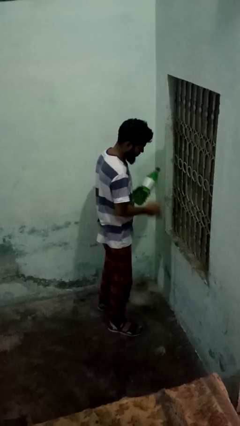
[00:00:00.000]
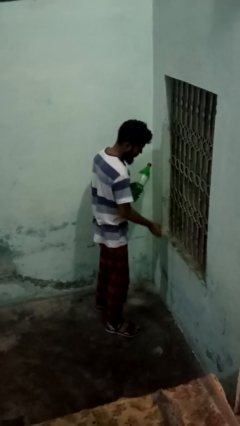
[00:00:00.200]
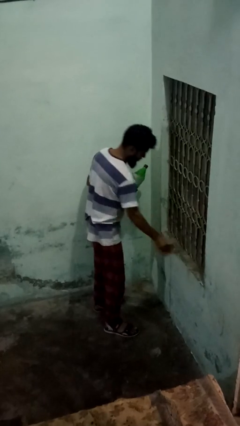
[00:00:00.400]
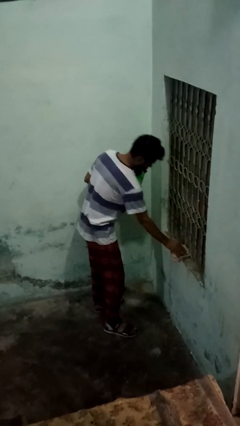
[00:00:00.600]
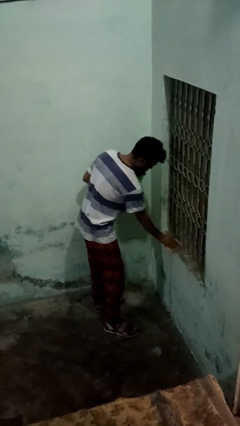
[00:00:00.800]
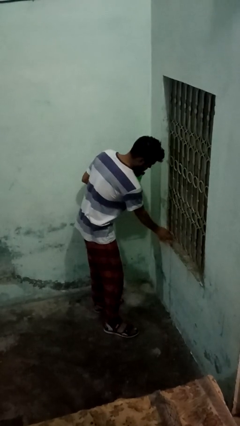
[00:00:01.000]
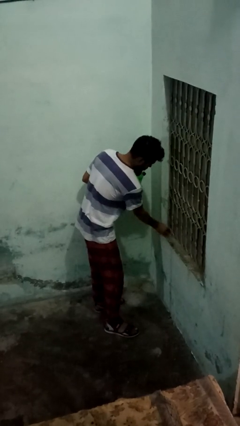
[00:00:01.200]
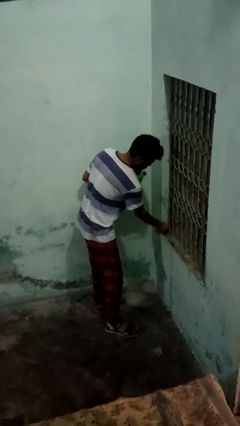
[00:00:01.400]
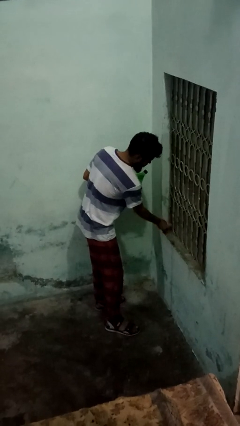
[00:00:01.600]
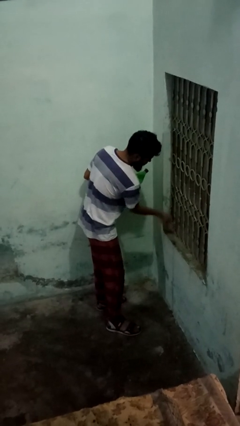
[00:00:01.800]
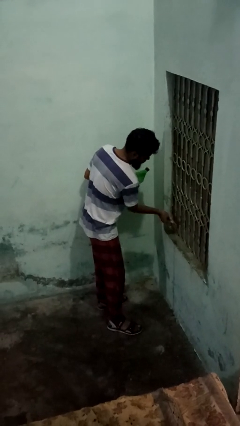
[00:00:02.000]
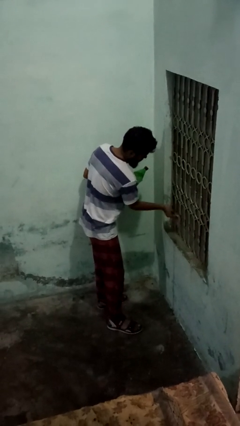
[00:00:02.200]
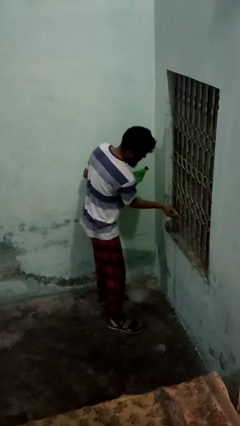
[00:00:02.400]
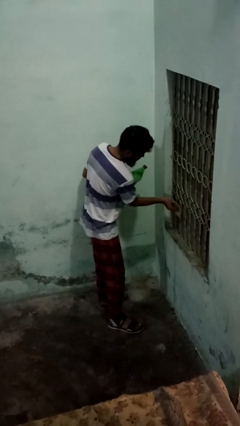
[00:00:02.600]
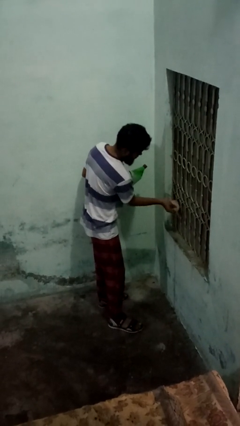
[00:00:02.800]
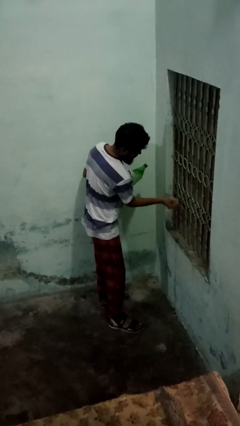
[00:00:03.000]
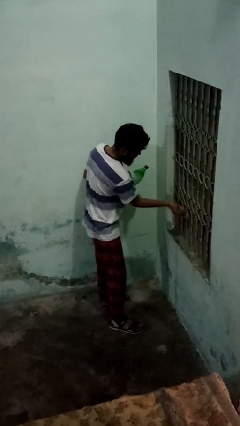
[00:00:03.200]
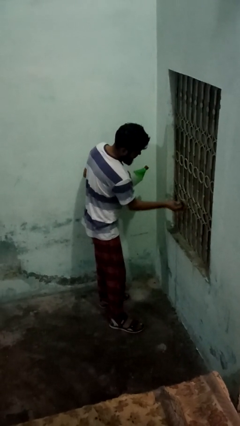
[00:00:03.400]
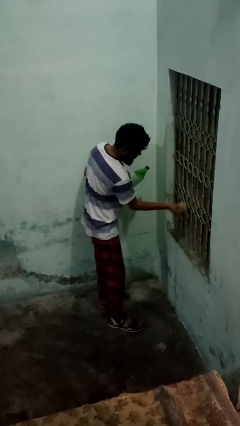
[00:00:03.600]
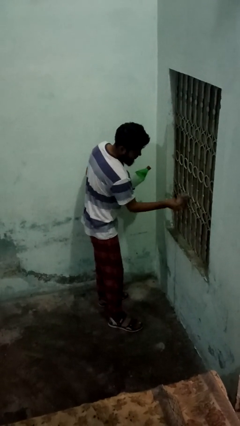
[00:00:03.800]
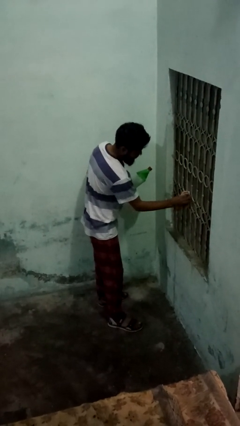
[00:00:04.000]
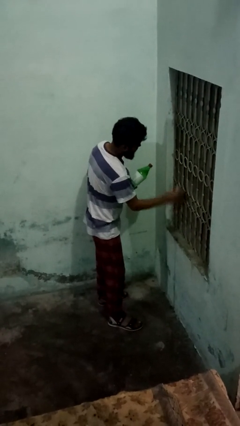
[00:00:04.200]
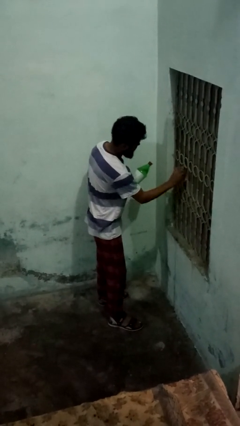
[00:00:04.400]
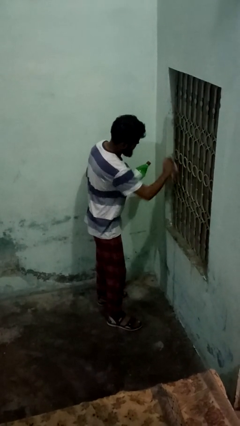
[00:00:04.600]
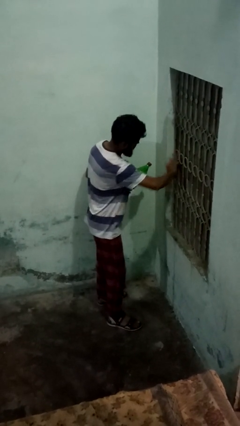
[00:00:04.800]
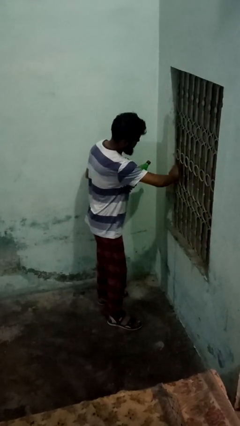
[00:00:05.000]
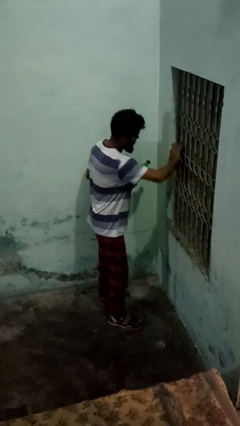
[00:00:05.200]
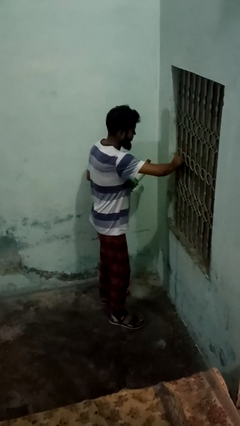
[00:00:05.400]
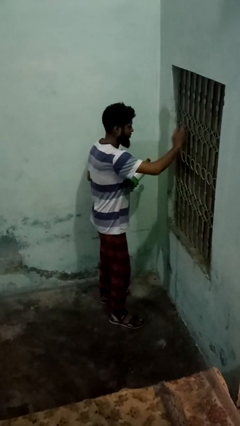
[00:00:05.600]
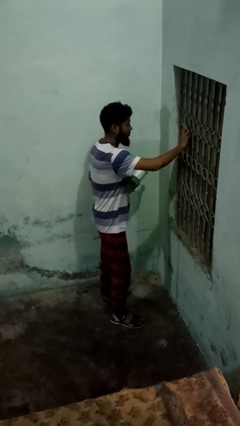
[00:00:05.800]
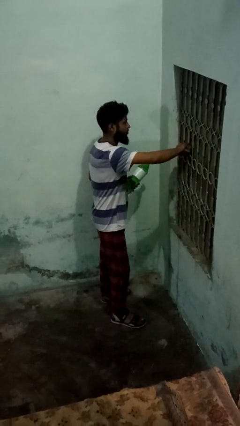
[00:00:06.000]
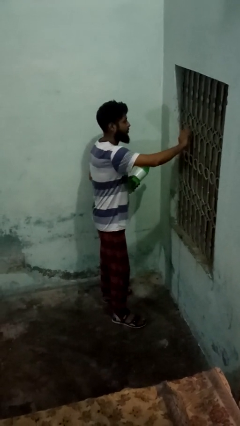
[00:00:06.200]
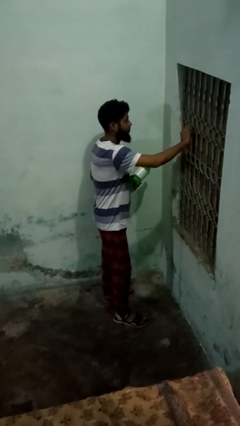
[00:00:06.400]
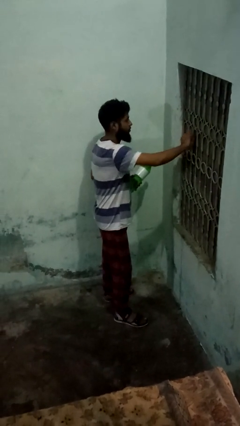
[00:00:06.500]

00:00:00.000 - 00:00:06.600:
person washes window

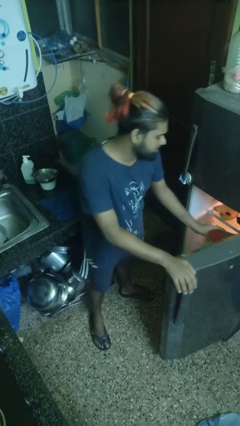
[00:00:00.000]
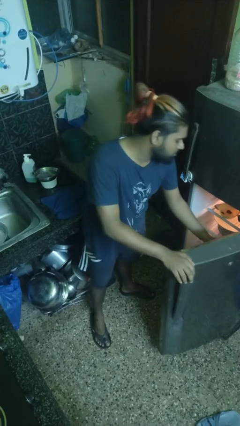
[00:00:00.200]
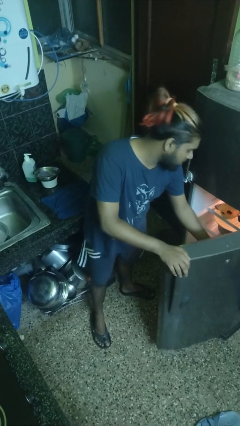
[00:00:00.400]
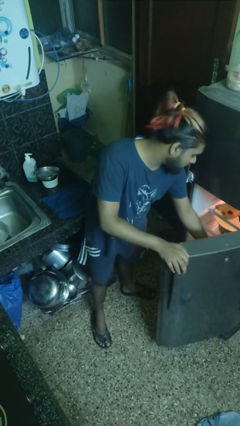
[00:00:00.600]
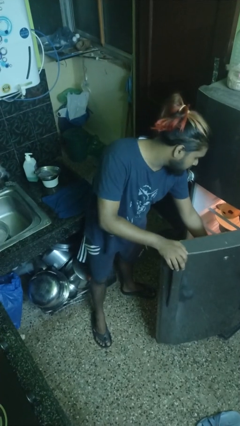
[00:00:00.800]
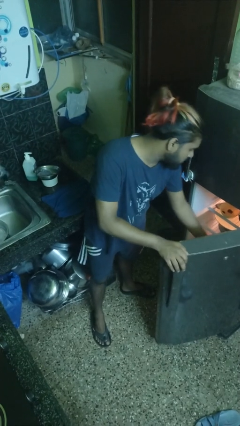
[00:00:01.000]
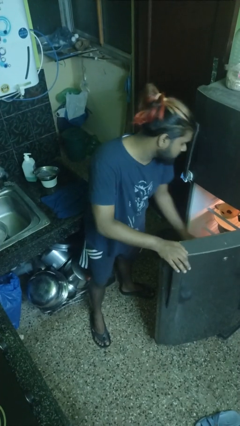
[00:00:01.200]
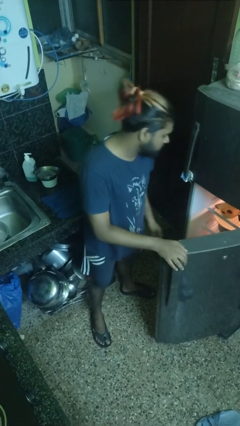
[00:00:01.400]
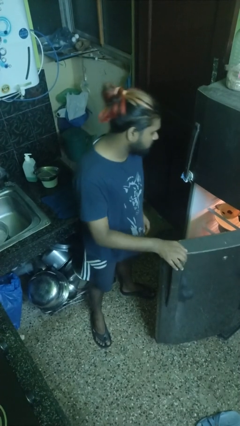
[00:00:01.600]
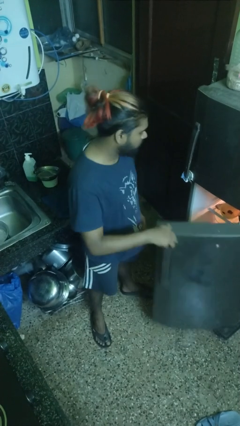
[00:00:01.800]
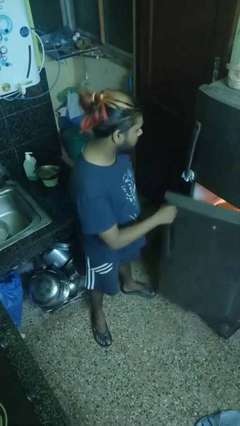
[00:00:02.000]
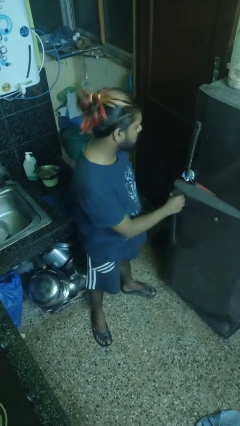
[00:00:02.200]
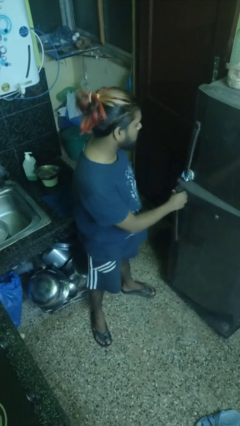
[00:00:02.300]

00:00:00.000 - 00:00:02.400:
person puts object into refrigerator

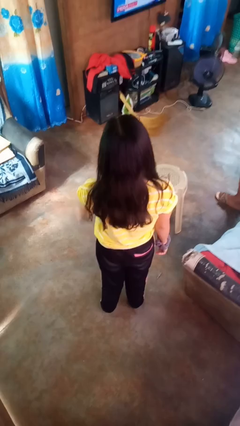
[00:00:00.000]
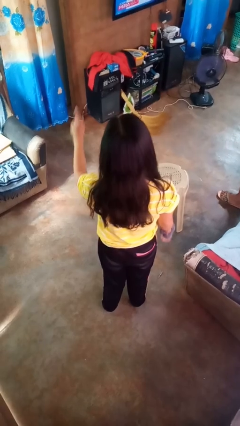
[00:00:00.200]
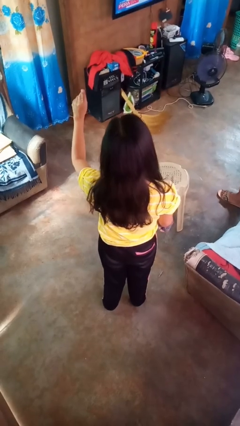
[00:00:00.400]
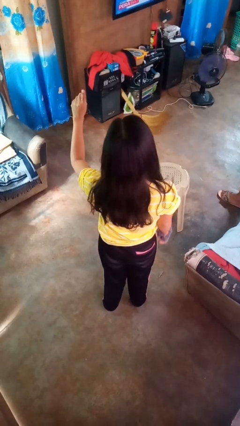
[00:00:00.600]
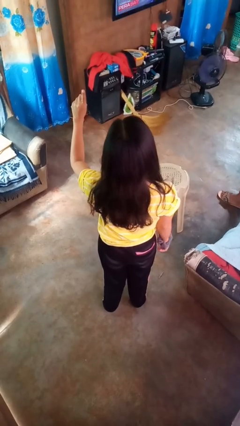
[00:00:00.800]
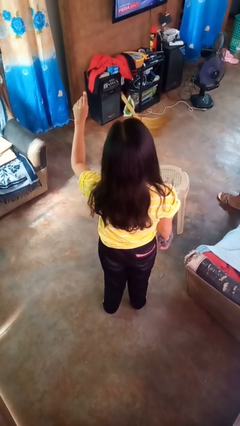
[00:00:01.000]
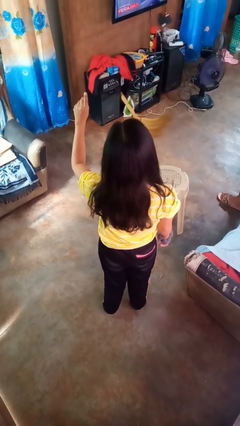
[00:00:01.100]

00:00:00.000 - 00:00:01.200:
person gestures number one

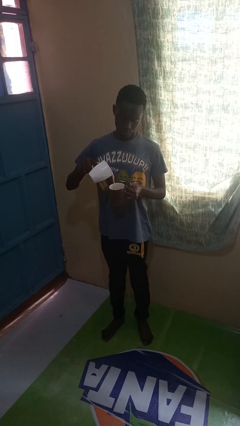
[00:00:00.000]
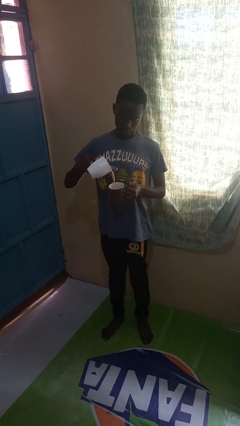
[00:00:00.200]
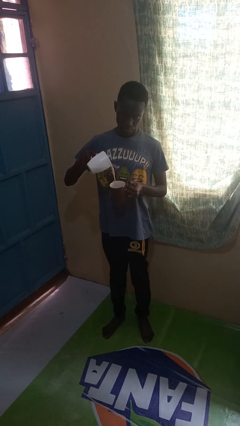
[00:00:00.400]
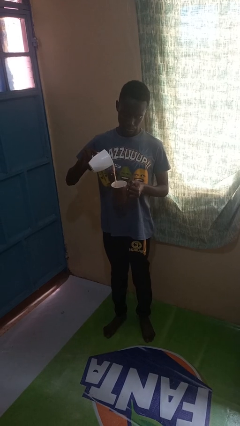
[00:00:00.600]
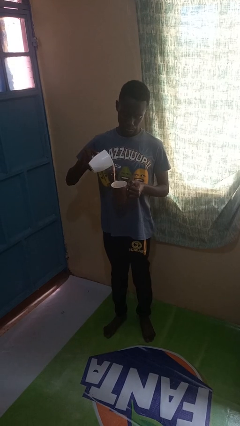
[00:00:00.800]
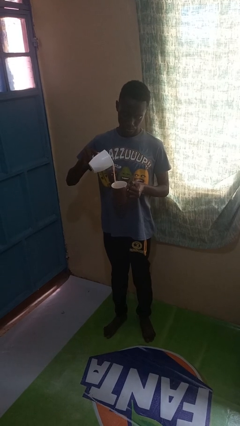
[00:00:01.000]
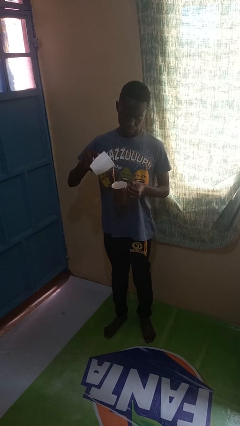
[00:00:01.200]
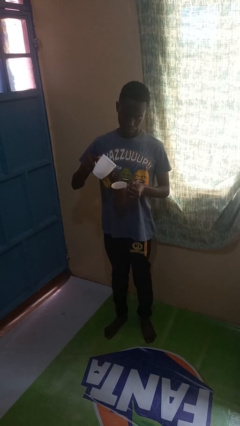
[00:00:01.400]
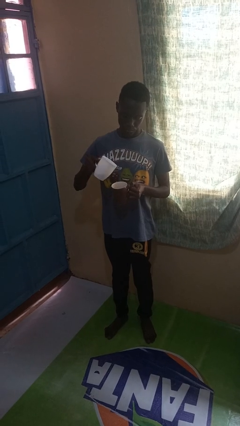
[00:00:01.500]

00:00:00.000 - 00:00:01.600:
person pours coffee into mug

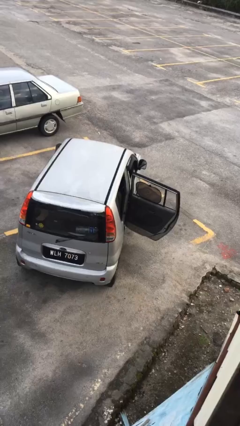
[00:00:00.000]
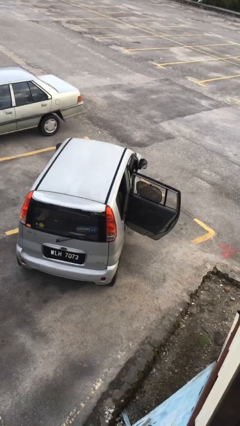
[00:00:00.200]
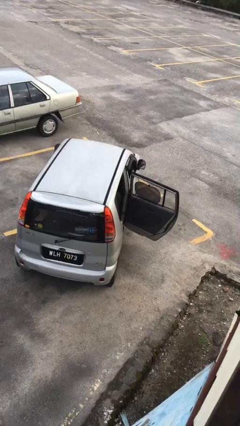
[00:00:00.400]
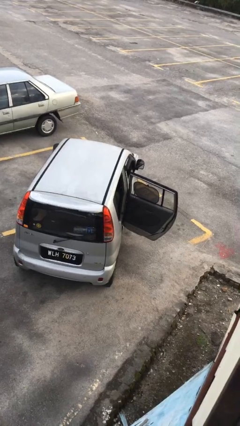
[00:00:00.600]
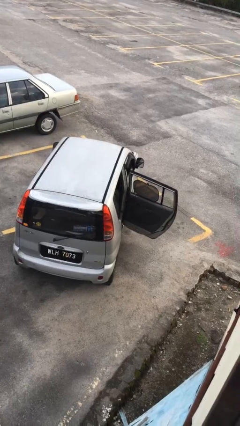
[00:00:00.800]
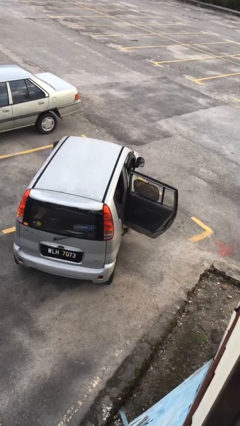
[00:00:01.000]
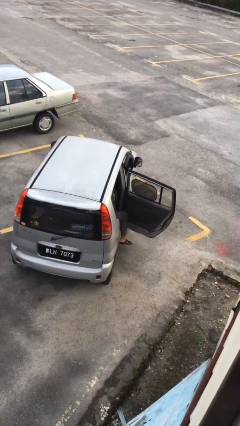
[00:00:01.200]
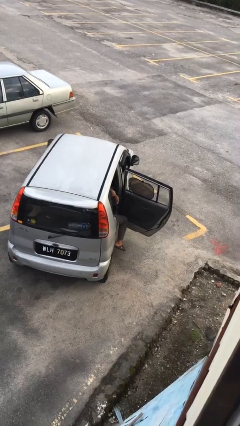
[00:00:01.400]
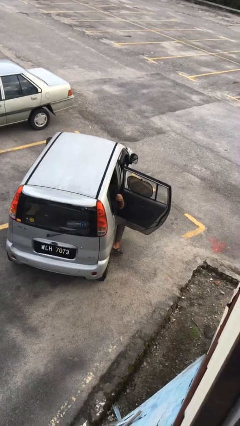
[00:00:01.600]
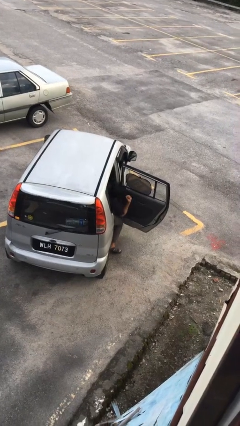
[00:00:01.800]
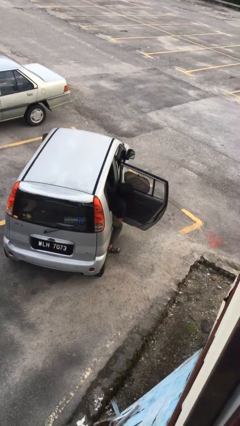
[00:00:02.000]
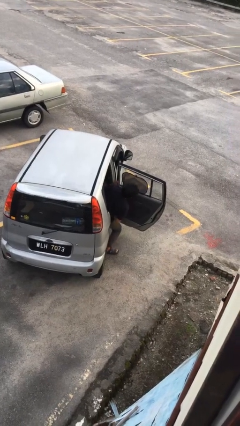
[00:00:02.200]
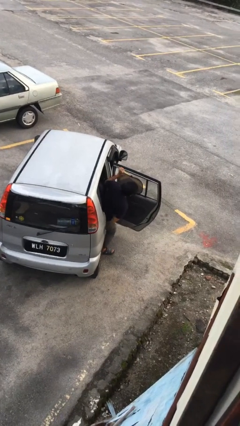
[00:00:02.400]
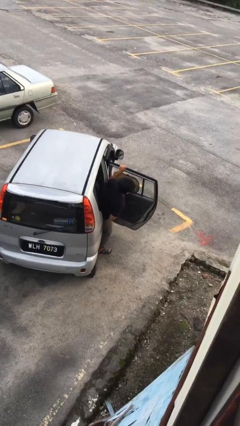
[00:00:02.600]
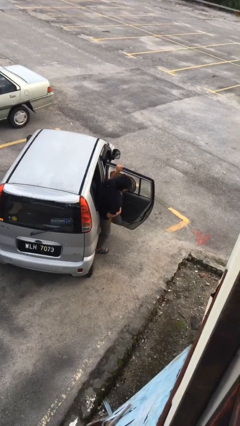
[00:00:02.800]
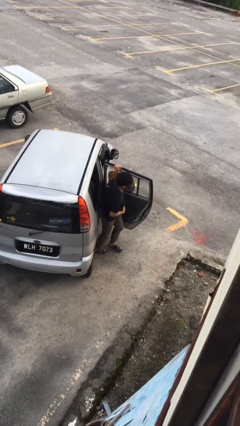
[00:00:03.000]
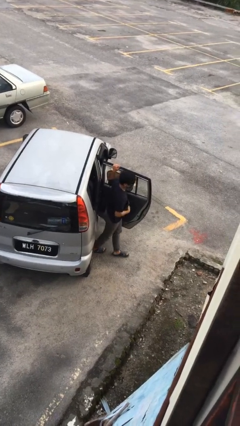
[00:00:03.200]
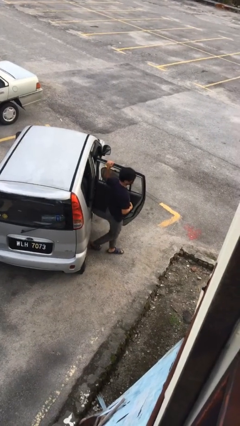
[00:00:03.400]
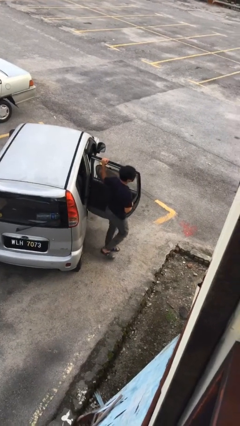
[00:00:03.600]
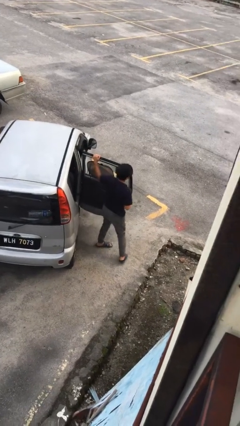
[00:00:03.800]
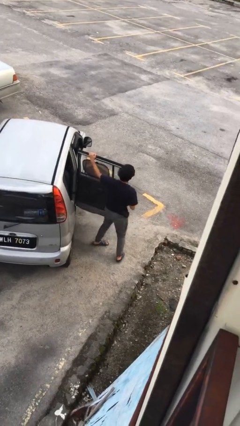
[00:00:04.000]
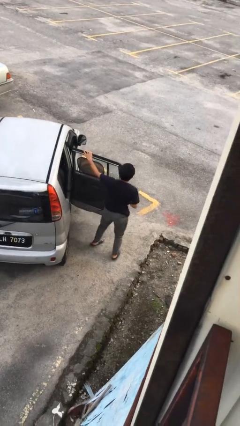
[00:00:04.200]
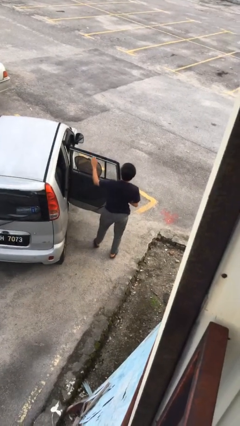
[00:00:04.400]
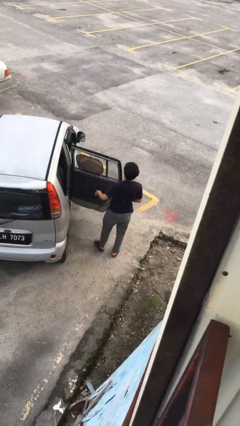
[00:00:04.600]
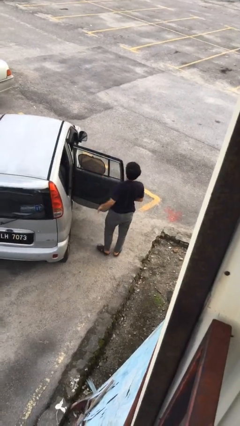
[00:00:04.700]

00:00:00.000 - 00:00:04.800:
person exits car

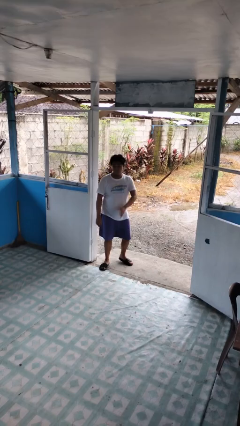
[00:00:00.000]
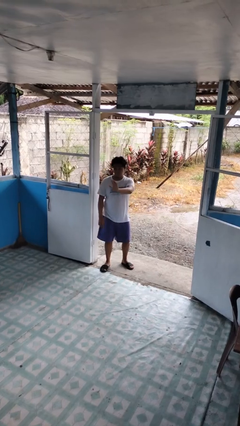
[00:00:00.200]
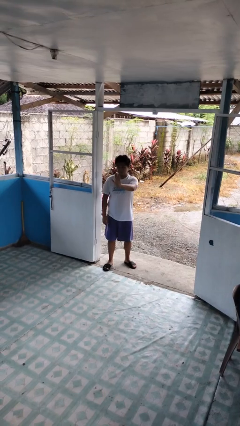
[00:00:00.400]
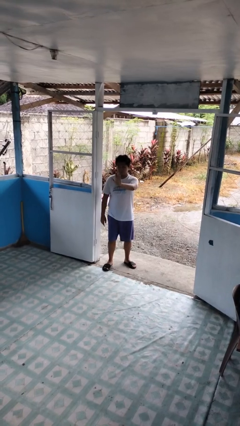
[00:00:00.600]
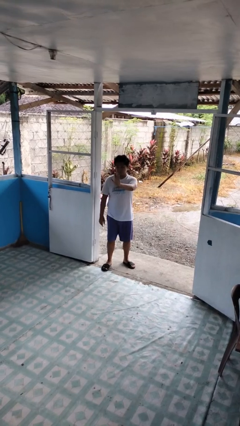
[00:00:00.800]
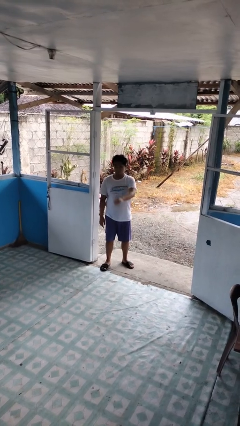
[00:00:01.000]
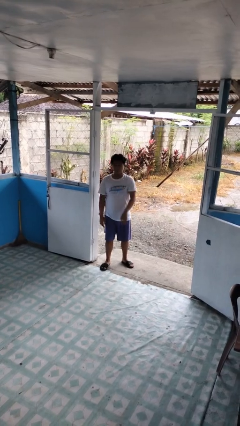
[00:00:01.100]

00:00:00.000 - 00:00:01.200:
person gestures stop
